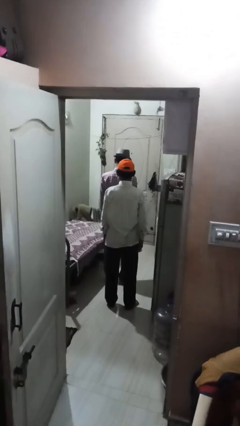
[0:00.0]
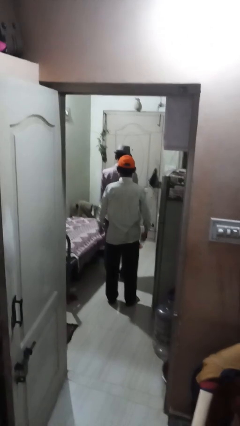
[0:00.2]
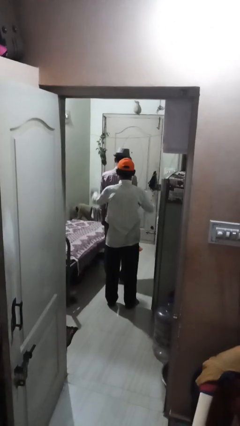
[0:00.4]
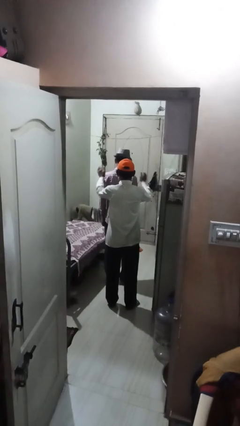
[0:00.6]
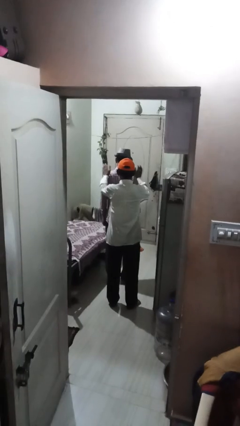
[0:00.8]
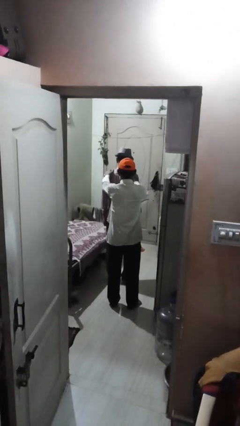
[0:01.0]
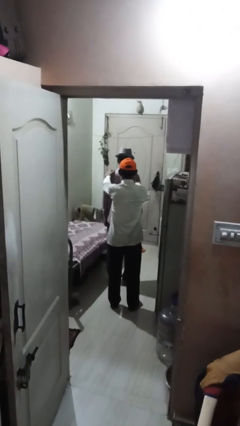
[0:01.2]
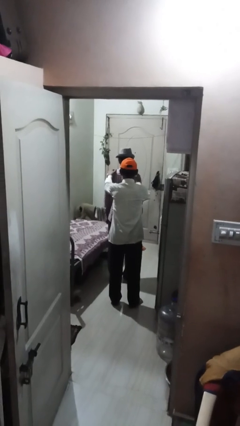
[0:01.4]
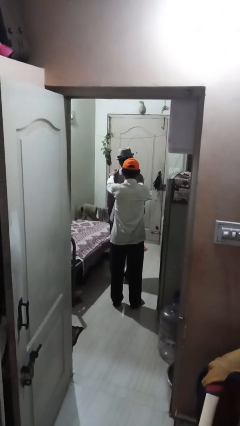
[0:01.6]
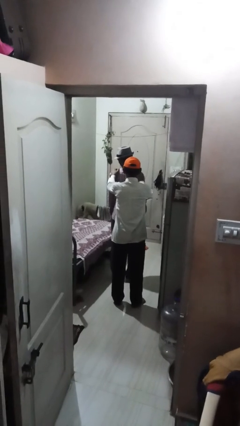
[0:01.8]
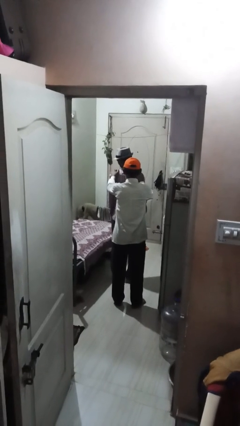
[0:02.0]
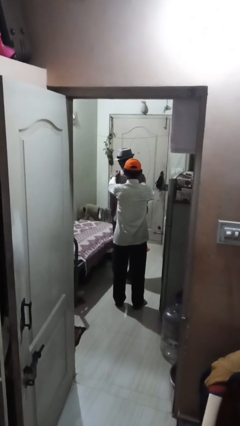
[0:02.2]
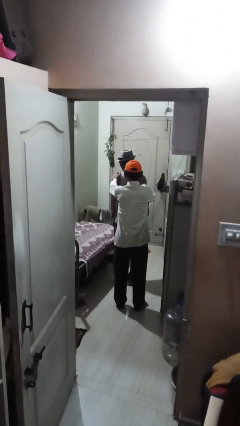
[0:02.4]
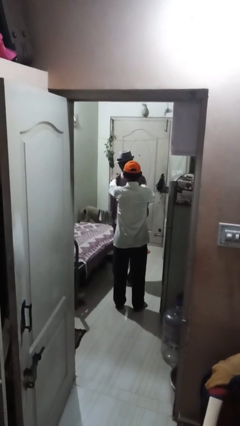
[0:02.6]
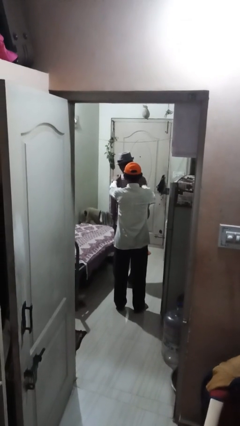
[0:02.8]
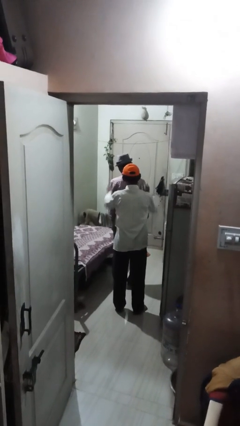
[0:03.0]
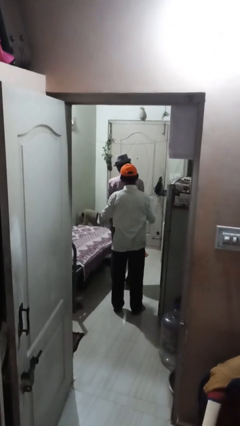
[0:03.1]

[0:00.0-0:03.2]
person touches back of person

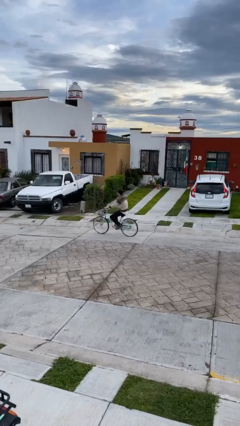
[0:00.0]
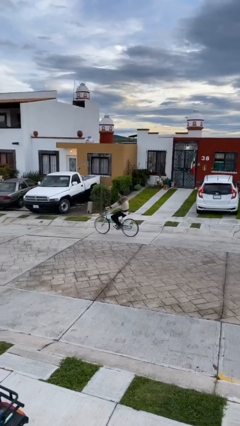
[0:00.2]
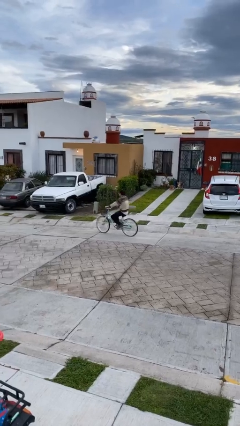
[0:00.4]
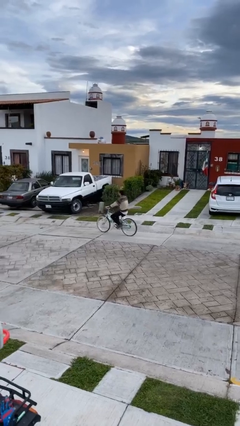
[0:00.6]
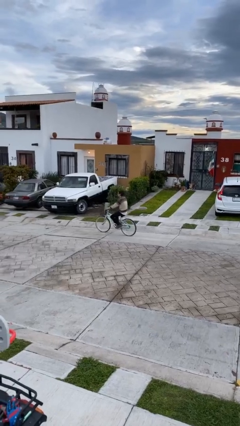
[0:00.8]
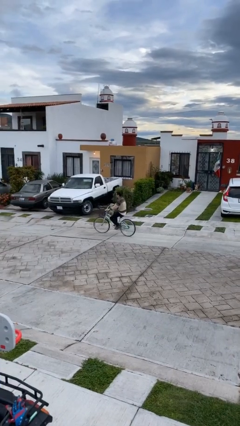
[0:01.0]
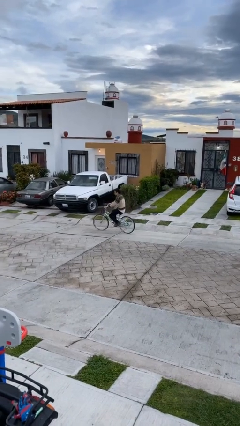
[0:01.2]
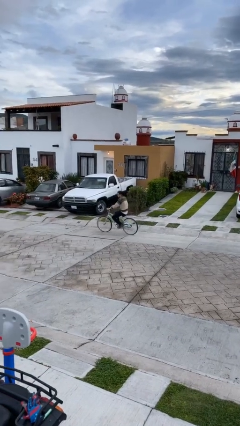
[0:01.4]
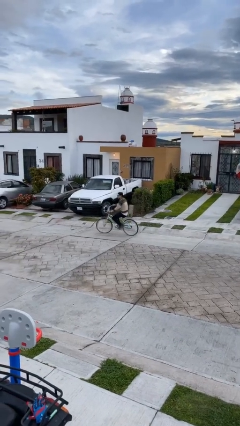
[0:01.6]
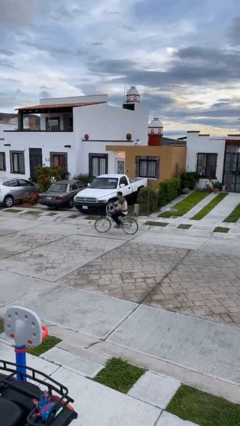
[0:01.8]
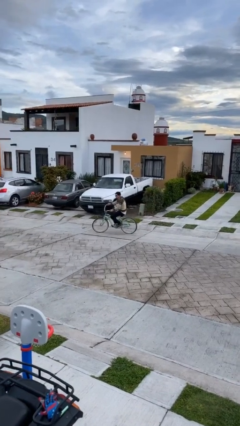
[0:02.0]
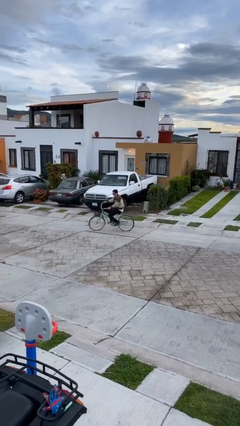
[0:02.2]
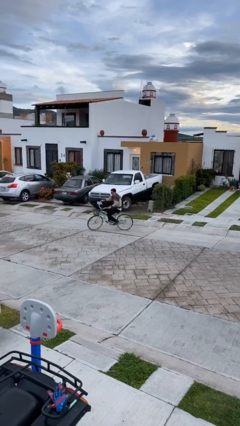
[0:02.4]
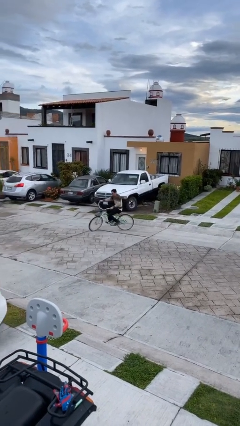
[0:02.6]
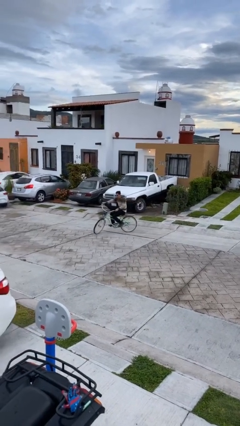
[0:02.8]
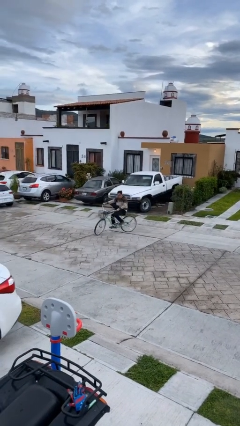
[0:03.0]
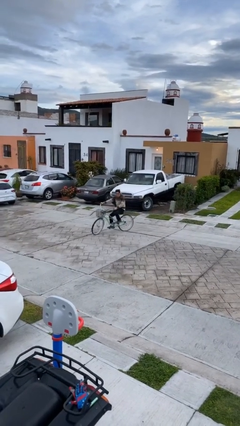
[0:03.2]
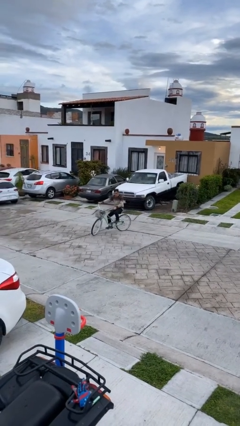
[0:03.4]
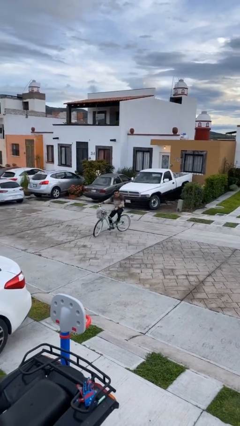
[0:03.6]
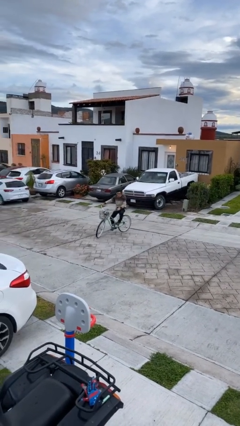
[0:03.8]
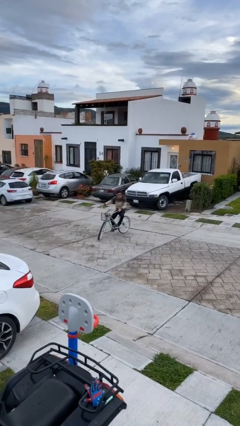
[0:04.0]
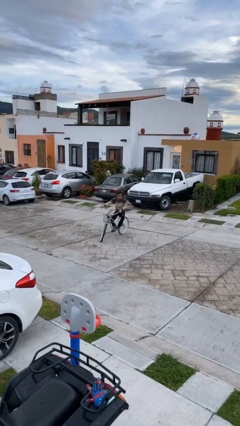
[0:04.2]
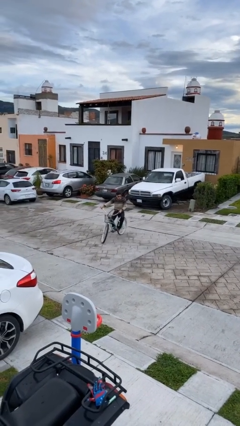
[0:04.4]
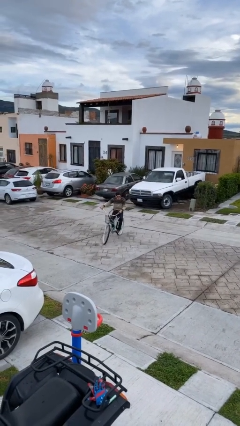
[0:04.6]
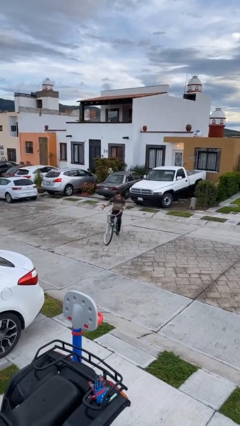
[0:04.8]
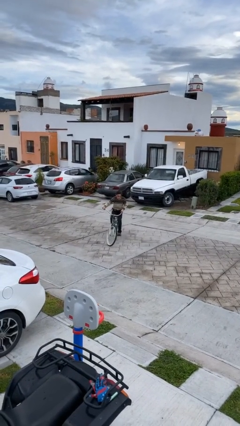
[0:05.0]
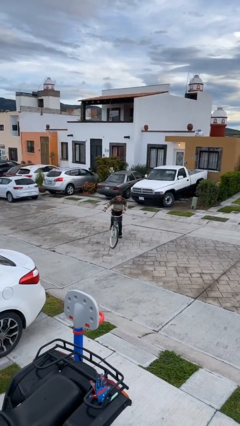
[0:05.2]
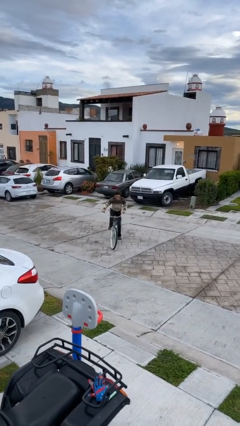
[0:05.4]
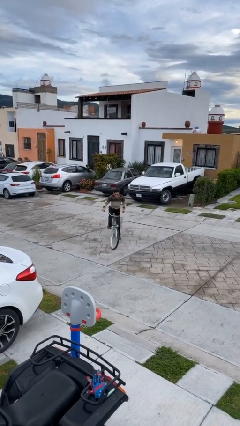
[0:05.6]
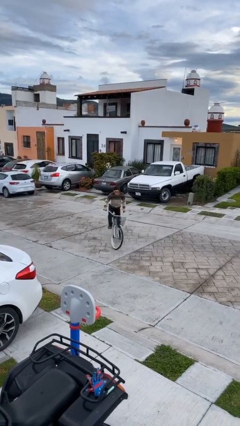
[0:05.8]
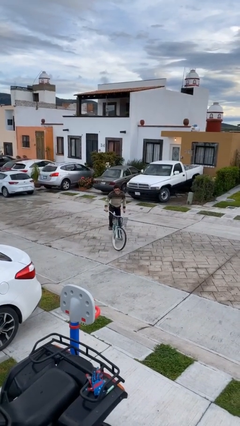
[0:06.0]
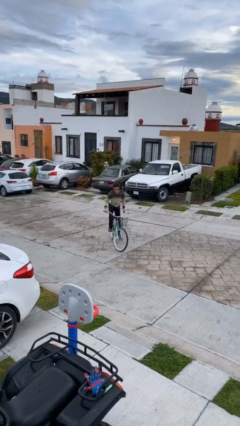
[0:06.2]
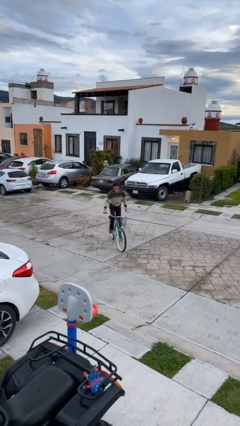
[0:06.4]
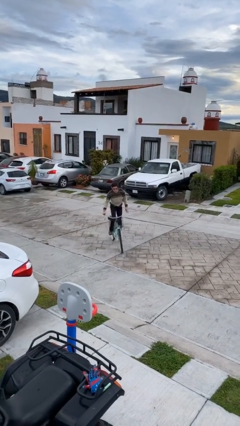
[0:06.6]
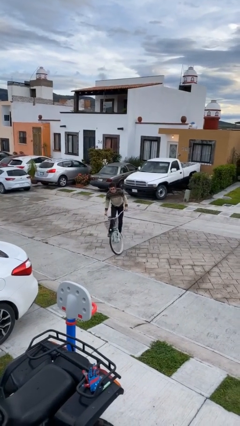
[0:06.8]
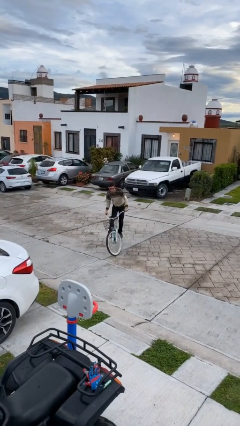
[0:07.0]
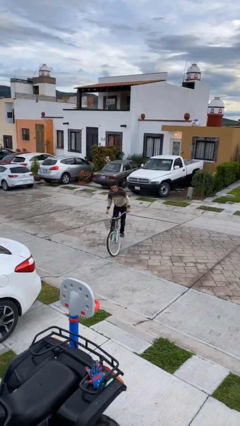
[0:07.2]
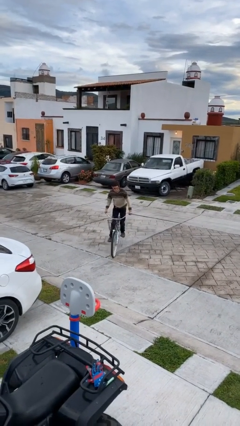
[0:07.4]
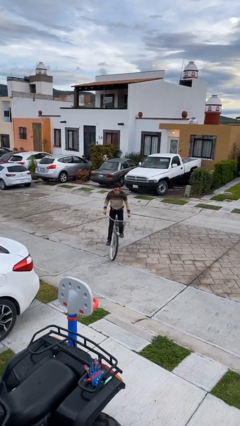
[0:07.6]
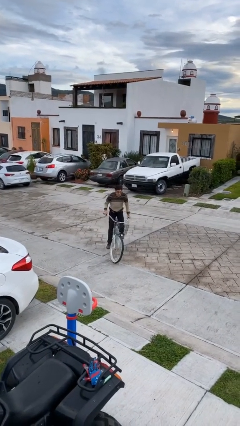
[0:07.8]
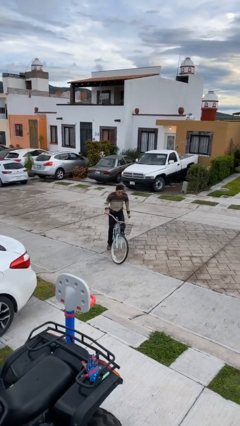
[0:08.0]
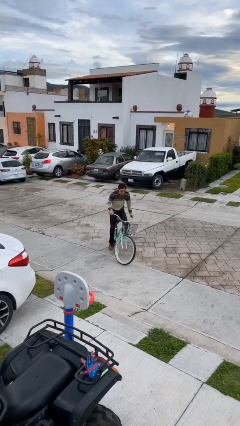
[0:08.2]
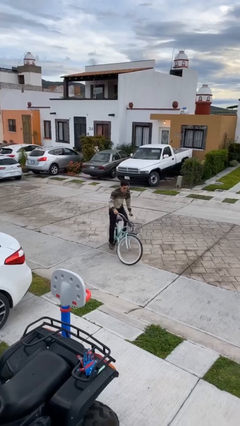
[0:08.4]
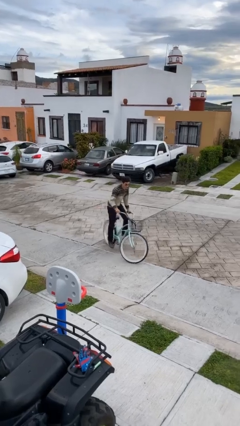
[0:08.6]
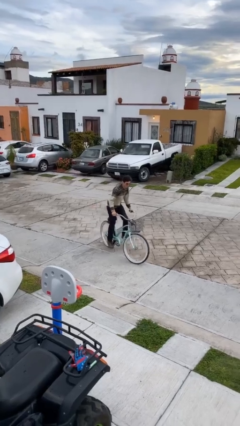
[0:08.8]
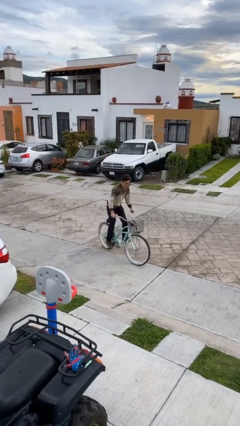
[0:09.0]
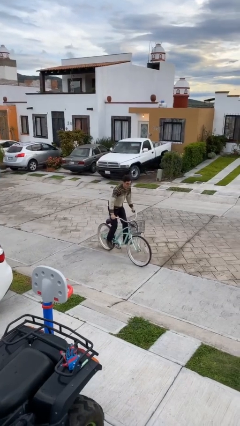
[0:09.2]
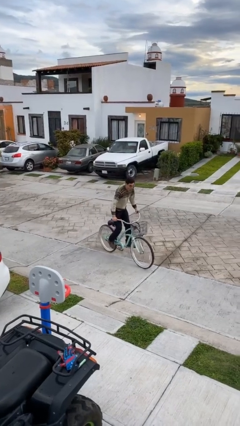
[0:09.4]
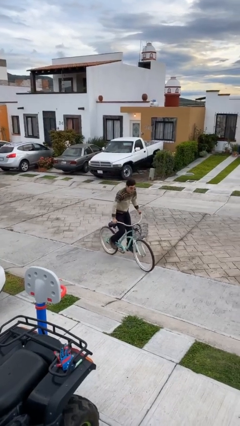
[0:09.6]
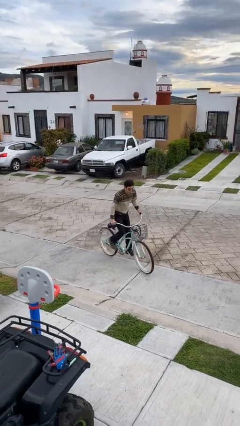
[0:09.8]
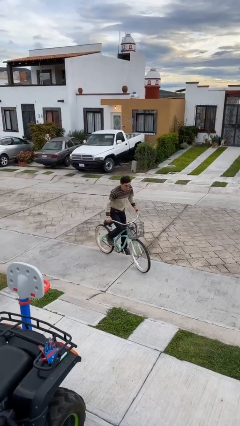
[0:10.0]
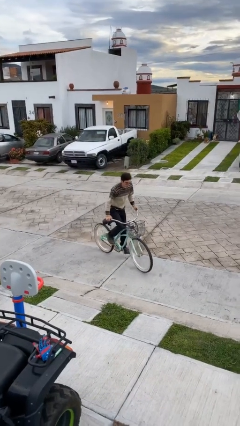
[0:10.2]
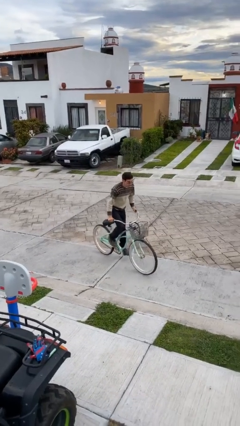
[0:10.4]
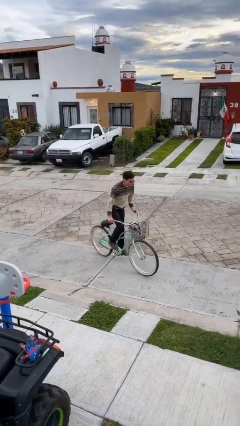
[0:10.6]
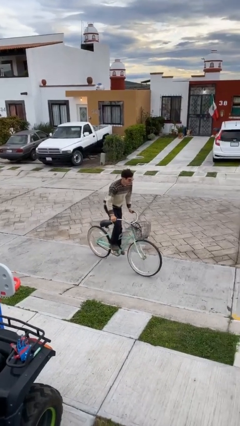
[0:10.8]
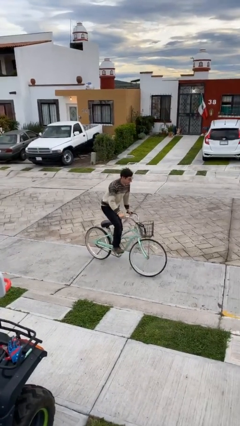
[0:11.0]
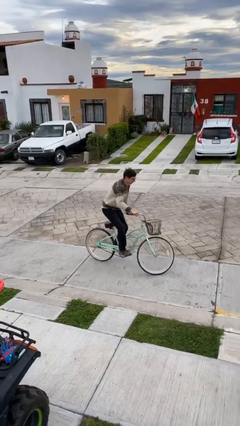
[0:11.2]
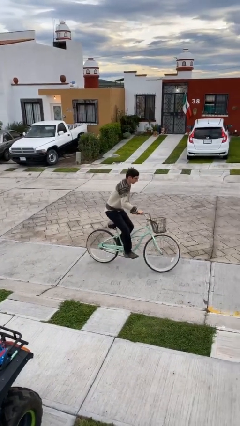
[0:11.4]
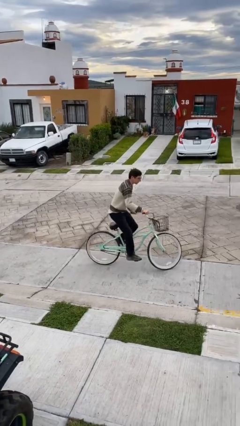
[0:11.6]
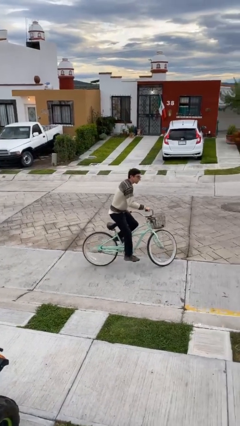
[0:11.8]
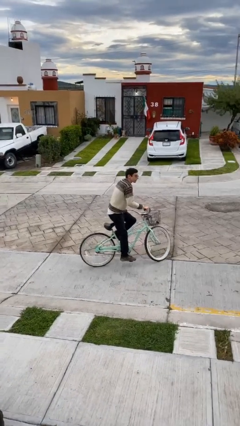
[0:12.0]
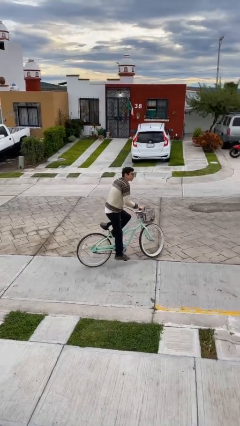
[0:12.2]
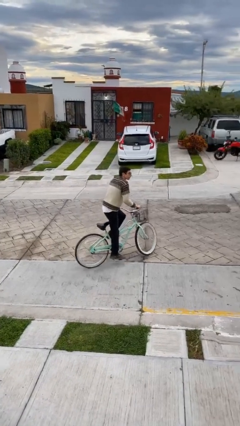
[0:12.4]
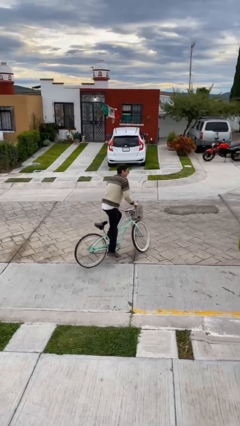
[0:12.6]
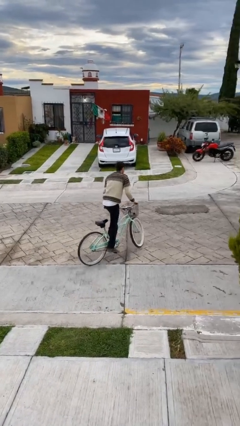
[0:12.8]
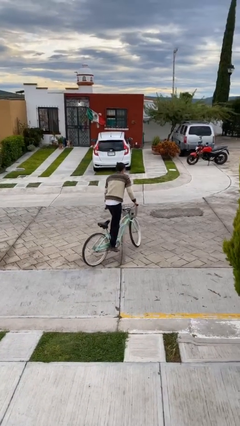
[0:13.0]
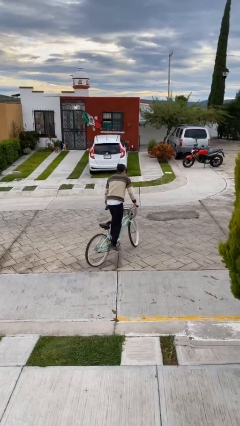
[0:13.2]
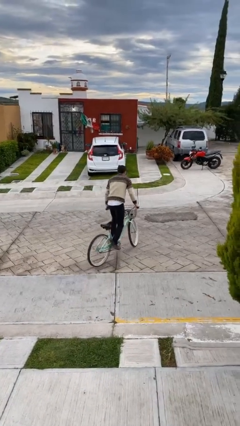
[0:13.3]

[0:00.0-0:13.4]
person rides bicycle

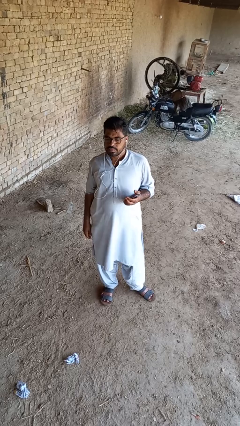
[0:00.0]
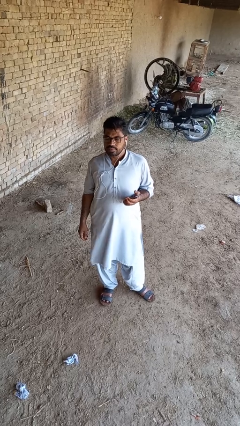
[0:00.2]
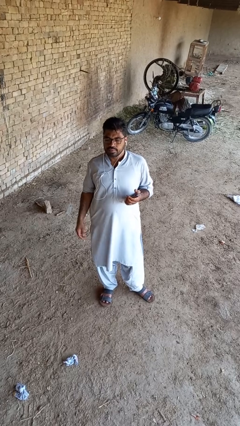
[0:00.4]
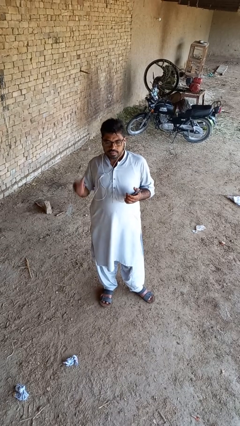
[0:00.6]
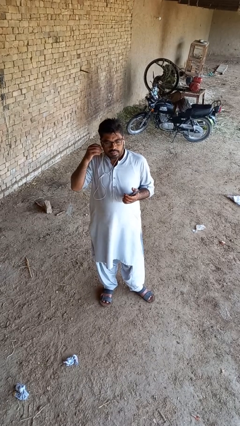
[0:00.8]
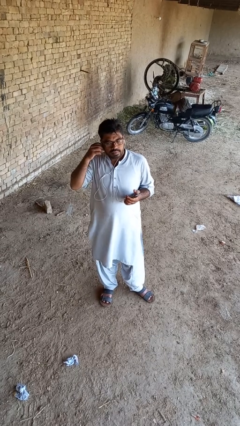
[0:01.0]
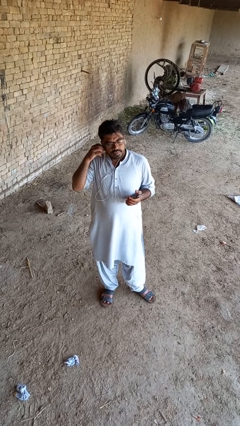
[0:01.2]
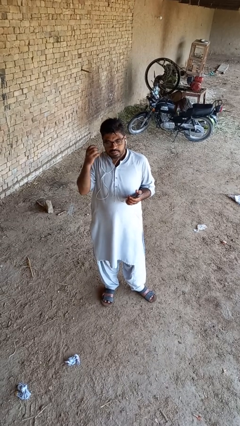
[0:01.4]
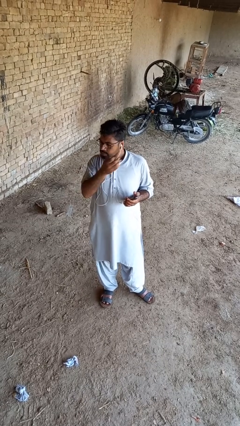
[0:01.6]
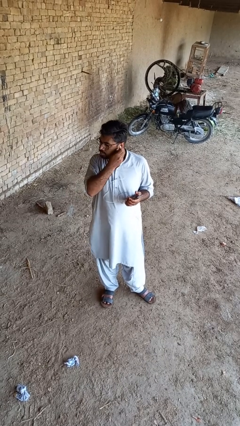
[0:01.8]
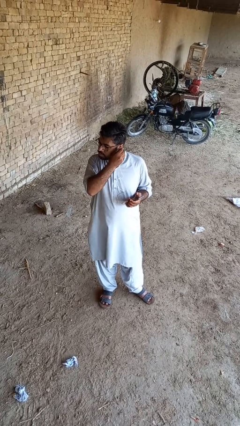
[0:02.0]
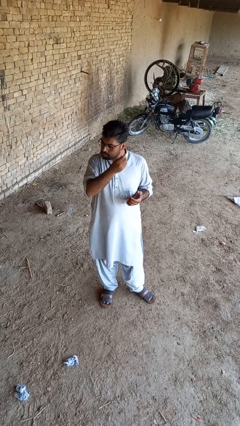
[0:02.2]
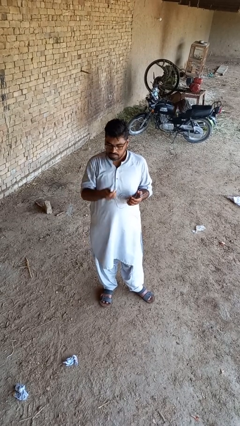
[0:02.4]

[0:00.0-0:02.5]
person takes off headphones
